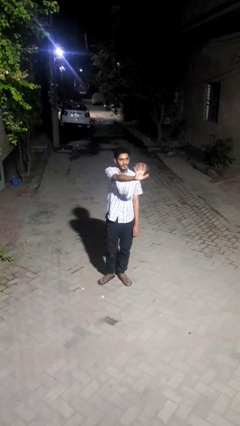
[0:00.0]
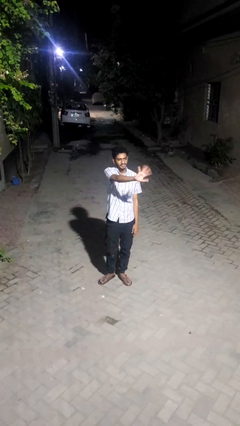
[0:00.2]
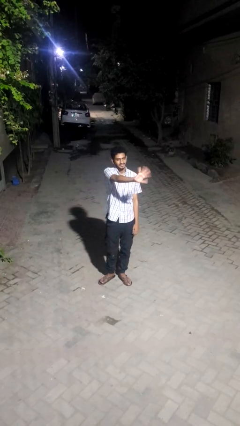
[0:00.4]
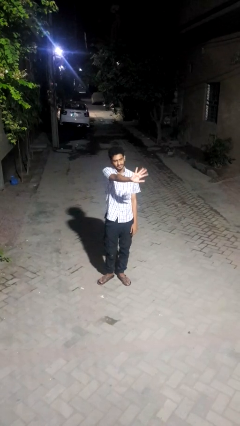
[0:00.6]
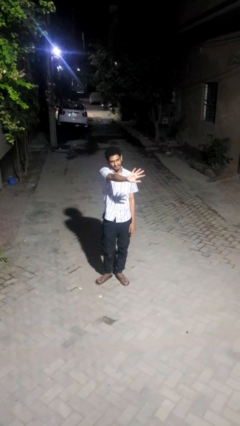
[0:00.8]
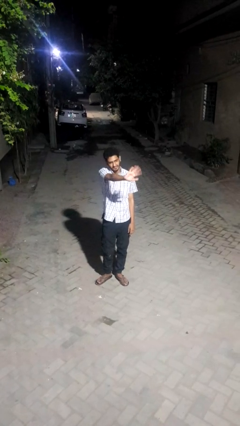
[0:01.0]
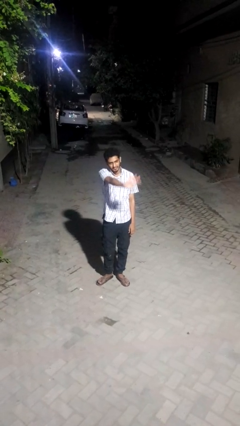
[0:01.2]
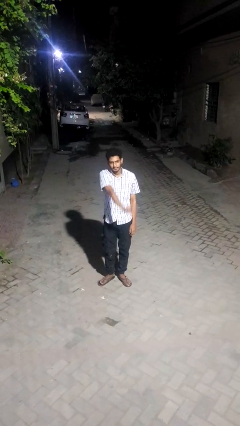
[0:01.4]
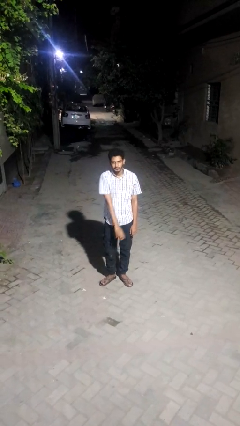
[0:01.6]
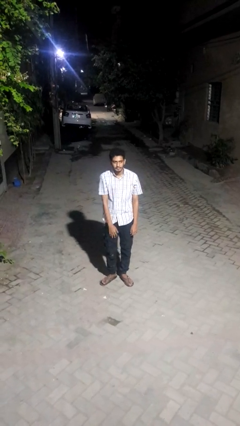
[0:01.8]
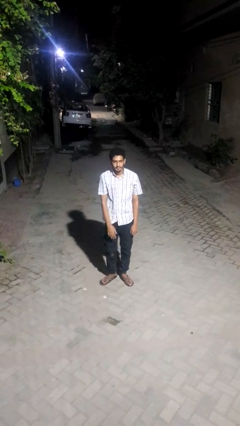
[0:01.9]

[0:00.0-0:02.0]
person waves at person

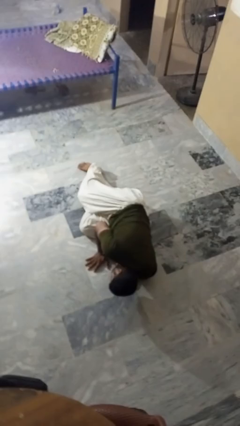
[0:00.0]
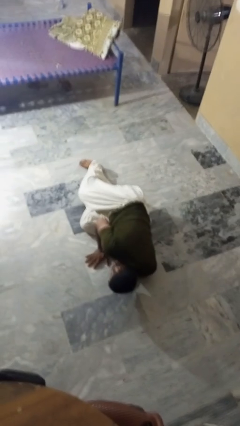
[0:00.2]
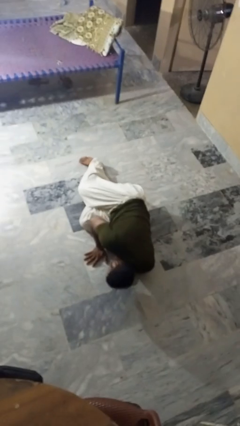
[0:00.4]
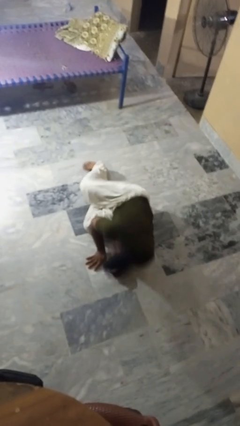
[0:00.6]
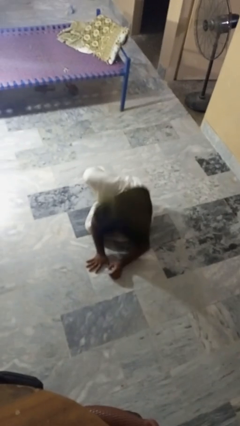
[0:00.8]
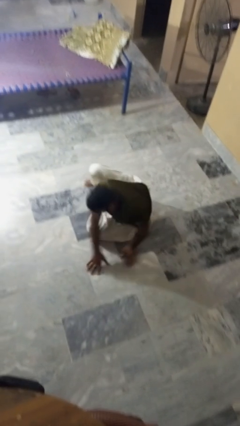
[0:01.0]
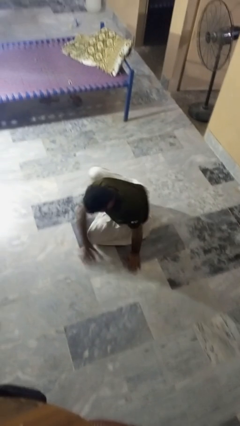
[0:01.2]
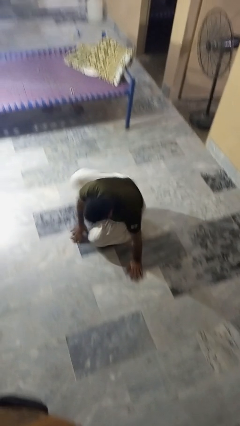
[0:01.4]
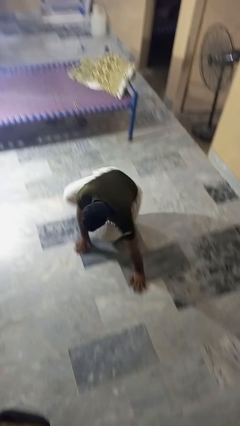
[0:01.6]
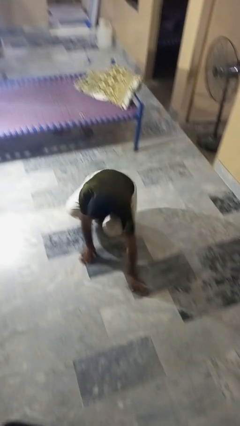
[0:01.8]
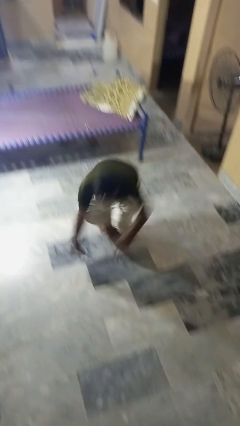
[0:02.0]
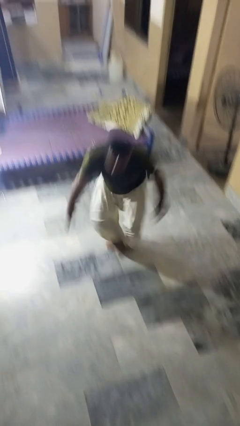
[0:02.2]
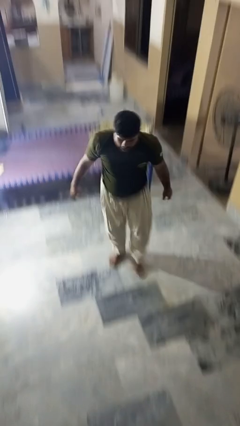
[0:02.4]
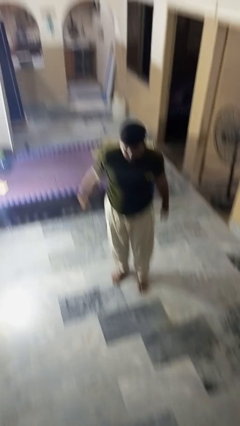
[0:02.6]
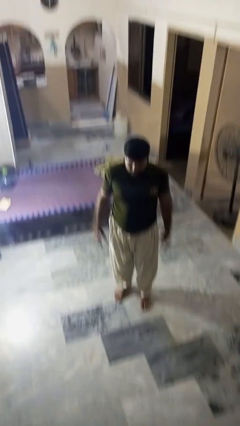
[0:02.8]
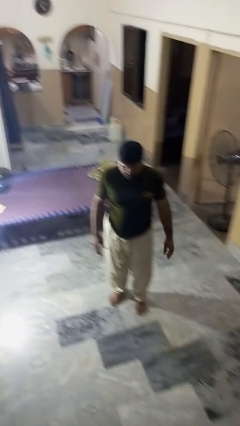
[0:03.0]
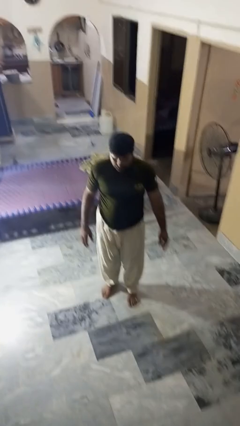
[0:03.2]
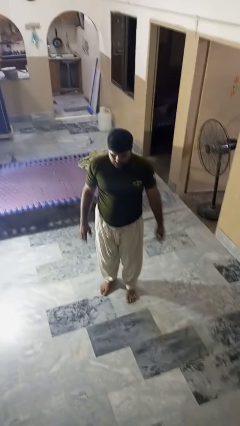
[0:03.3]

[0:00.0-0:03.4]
person stands up from floor

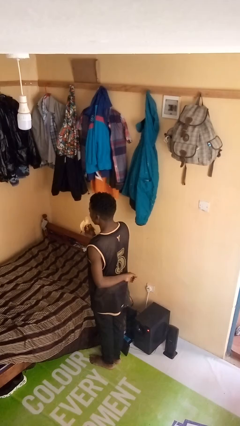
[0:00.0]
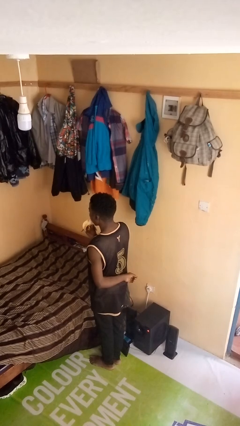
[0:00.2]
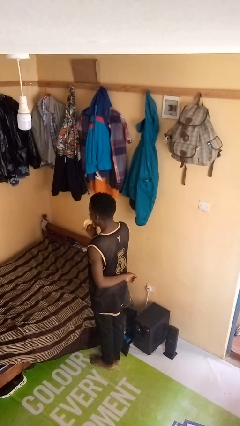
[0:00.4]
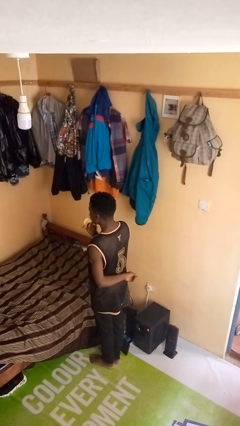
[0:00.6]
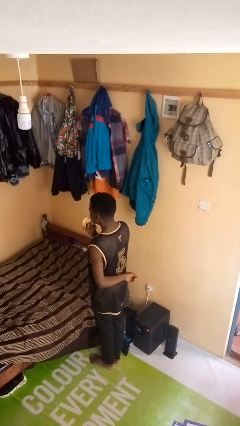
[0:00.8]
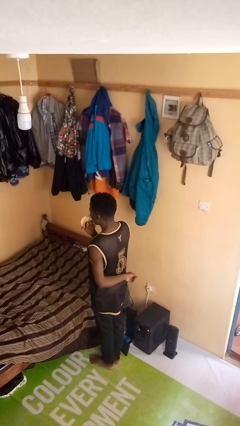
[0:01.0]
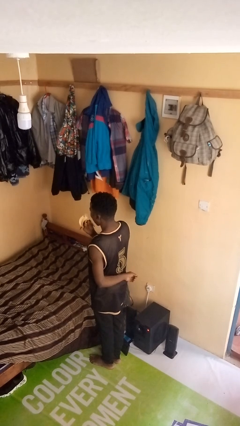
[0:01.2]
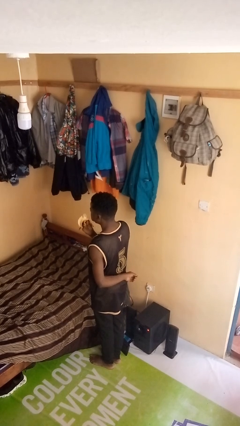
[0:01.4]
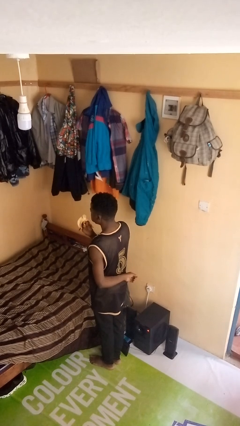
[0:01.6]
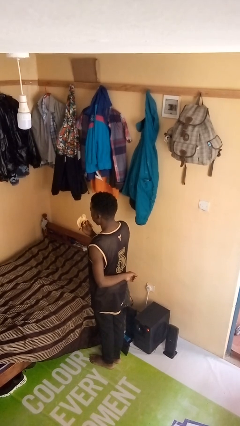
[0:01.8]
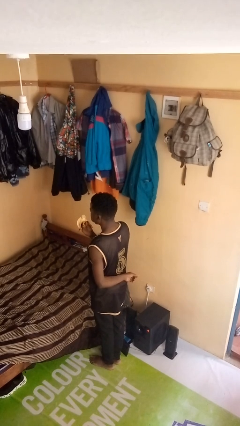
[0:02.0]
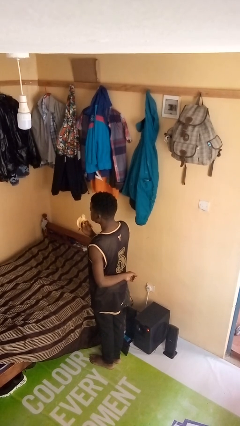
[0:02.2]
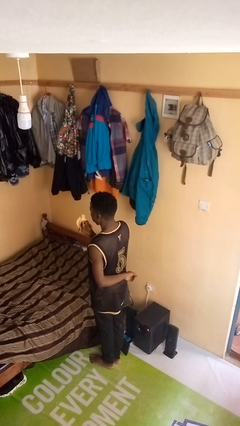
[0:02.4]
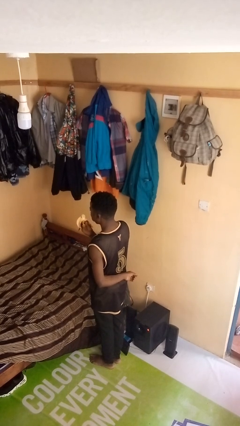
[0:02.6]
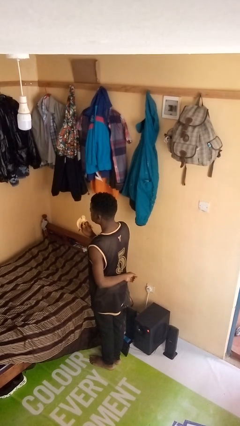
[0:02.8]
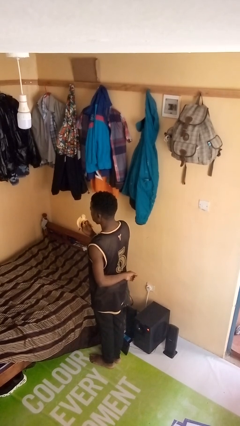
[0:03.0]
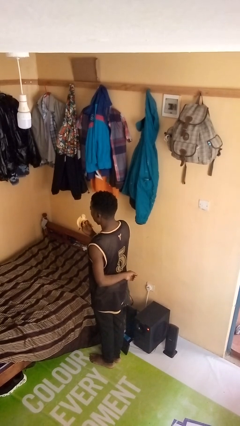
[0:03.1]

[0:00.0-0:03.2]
person eats banana

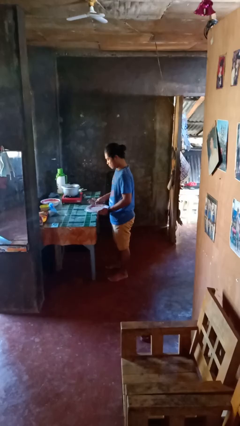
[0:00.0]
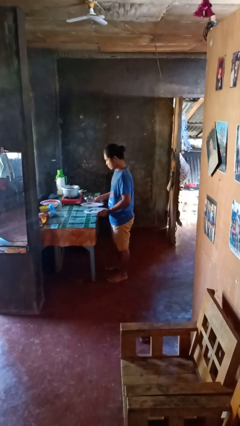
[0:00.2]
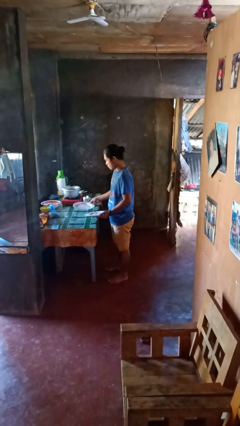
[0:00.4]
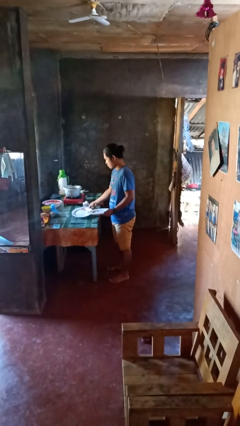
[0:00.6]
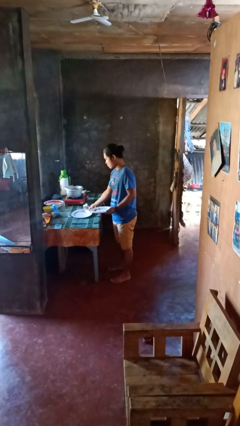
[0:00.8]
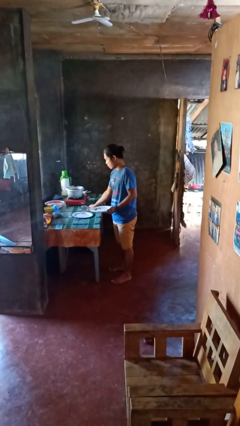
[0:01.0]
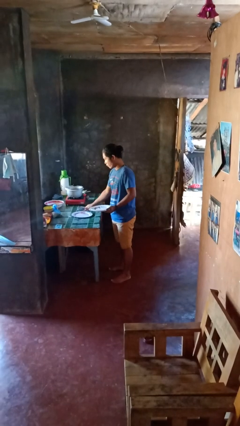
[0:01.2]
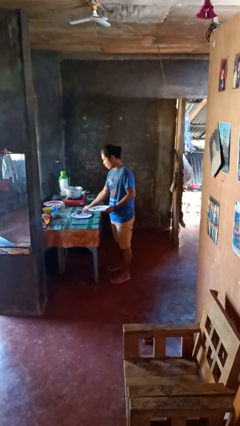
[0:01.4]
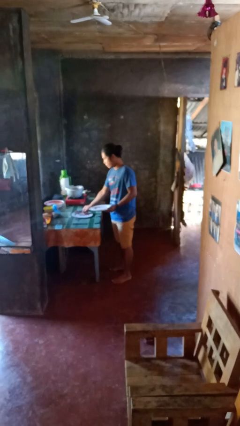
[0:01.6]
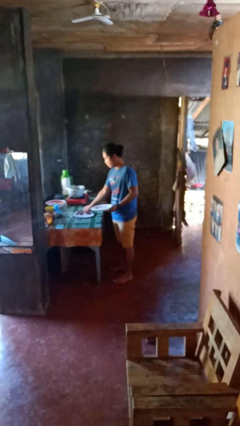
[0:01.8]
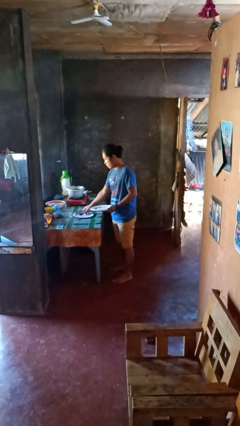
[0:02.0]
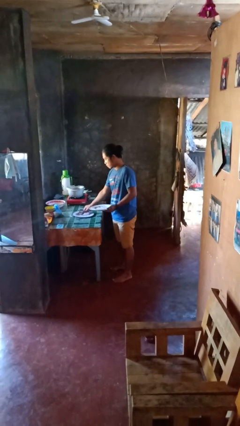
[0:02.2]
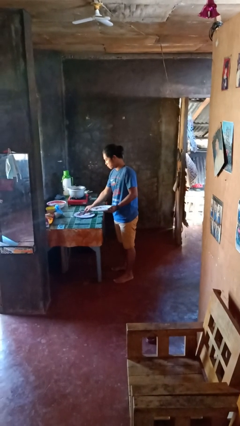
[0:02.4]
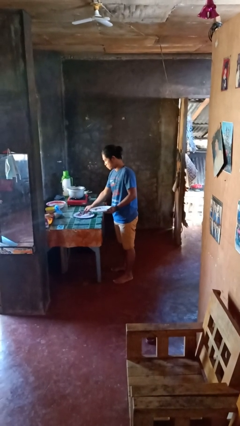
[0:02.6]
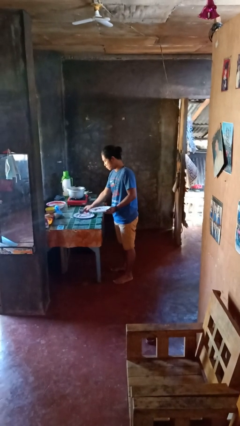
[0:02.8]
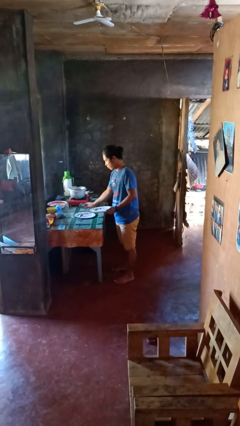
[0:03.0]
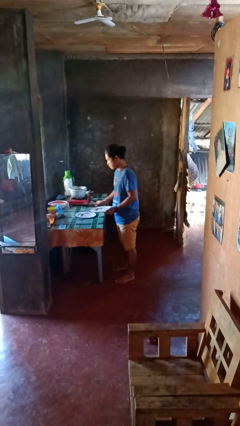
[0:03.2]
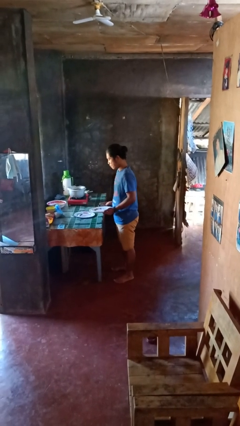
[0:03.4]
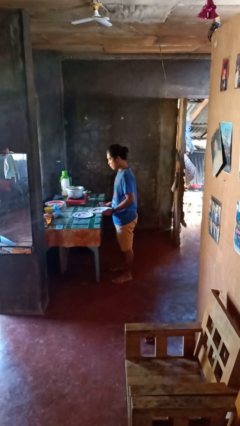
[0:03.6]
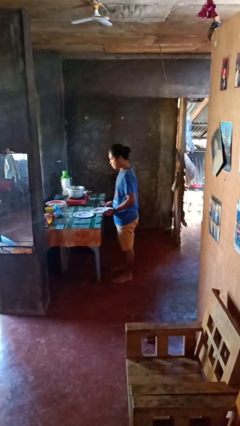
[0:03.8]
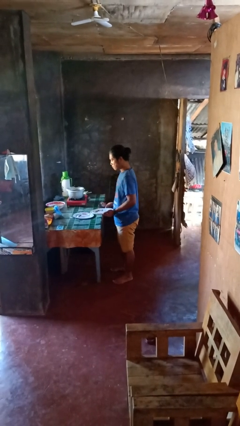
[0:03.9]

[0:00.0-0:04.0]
person sets table

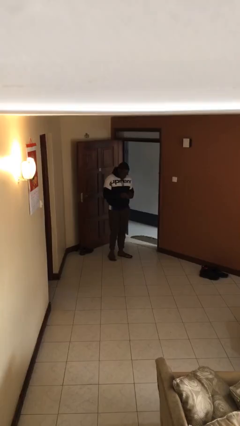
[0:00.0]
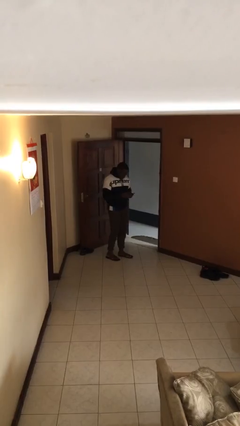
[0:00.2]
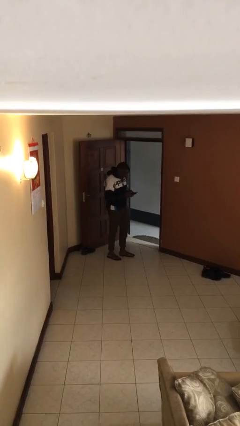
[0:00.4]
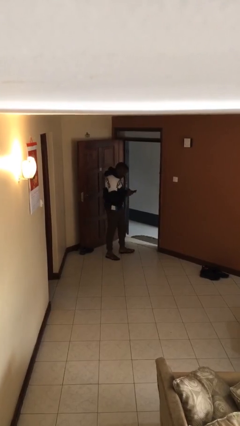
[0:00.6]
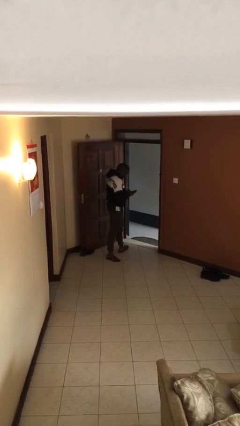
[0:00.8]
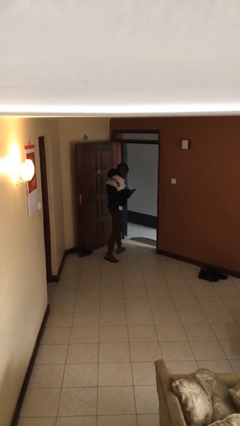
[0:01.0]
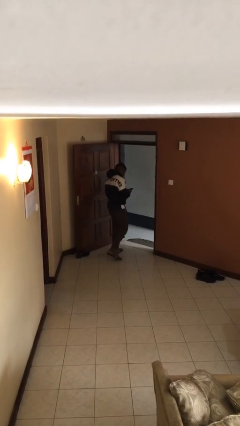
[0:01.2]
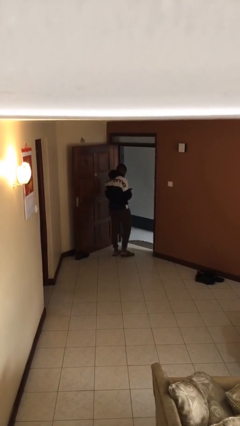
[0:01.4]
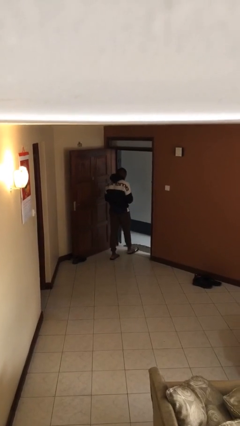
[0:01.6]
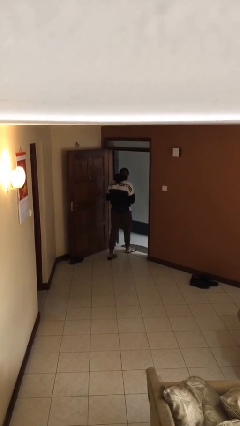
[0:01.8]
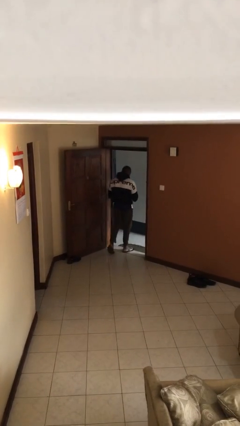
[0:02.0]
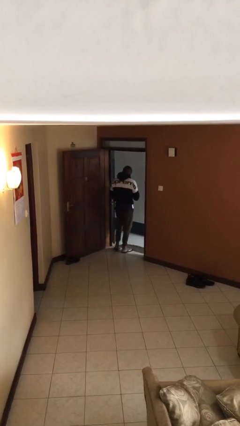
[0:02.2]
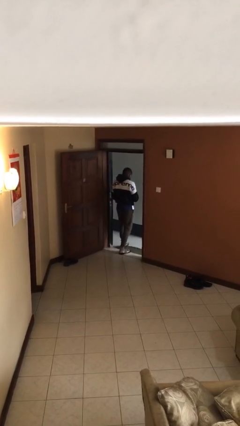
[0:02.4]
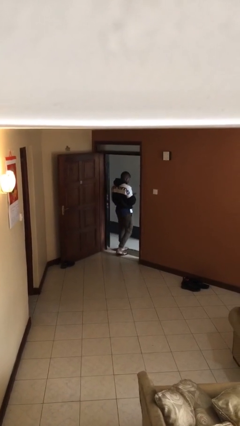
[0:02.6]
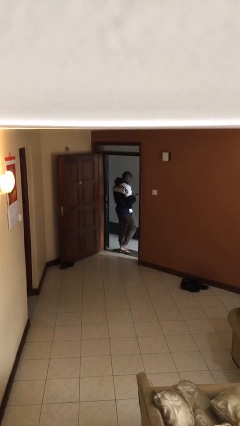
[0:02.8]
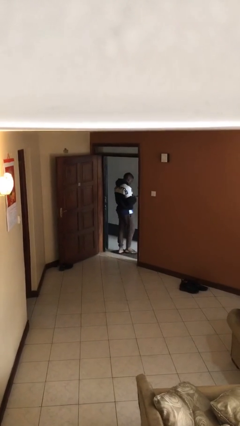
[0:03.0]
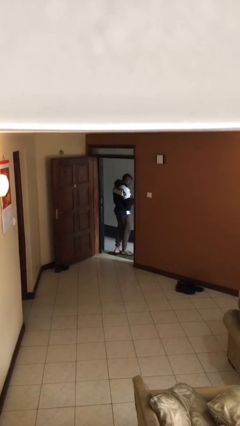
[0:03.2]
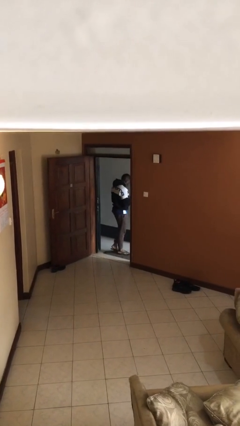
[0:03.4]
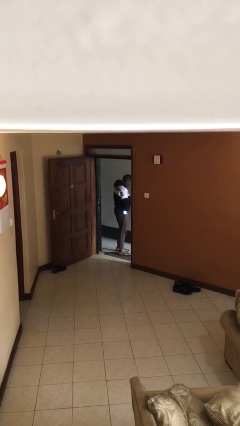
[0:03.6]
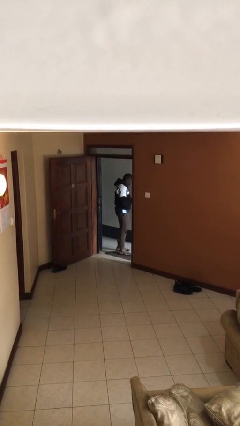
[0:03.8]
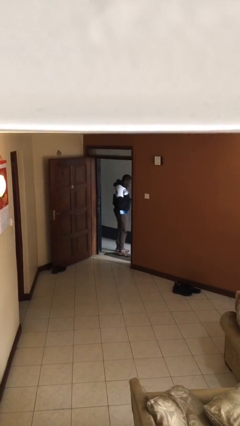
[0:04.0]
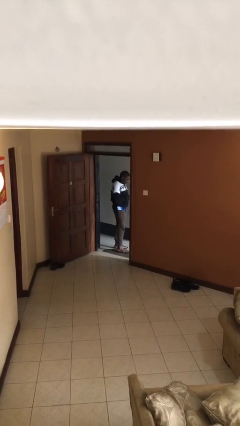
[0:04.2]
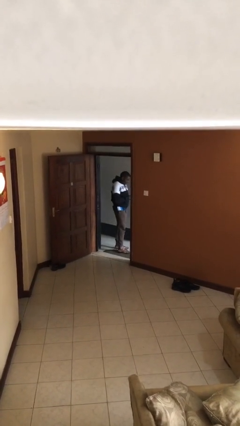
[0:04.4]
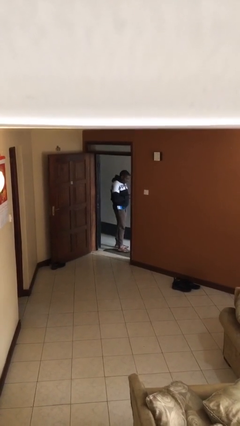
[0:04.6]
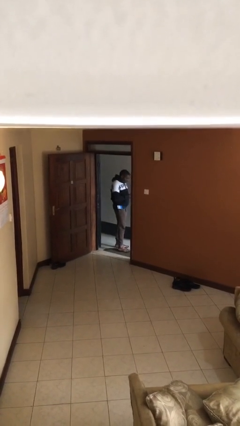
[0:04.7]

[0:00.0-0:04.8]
person exits scene through structure

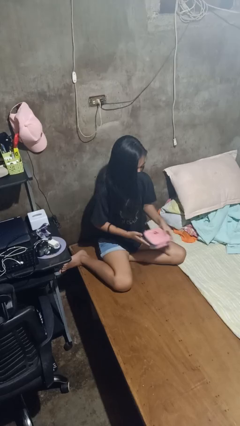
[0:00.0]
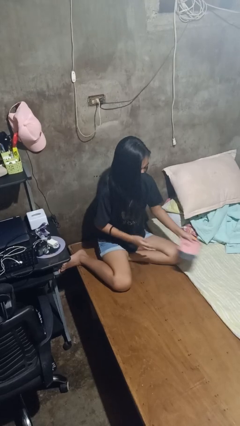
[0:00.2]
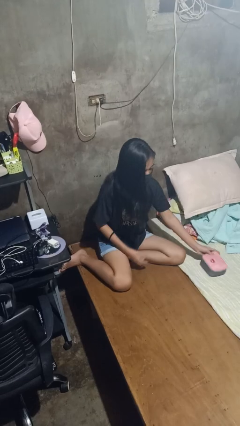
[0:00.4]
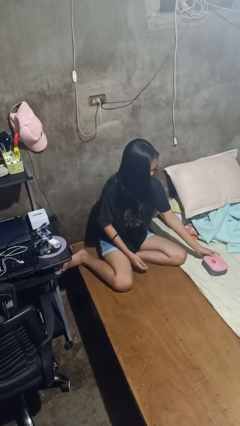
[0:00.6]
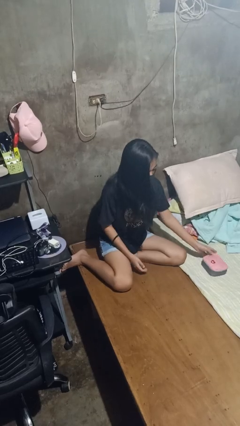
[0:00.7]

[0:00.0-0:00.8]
person puts down object on bed
